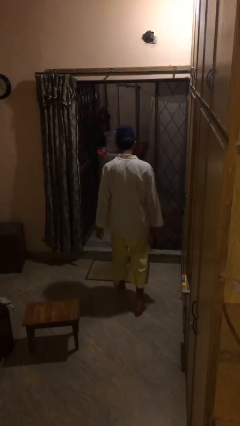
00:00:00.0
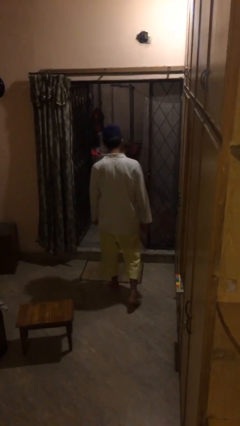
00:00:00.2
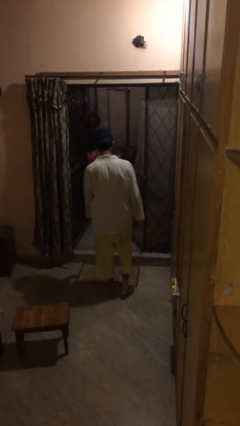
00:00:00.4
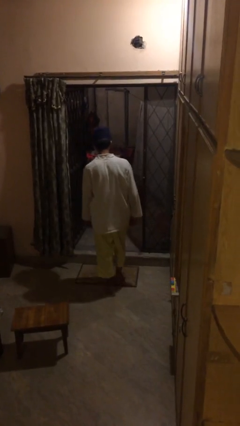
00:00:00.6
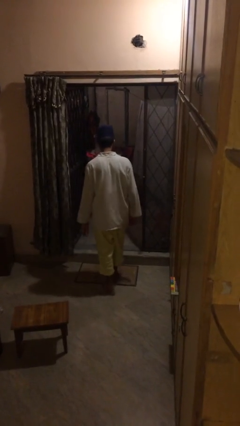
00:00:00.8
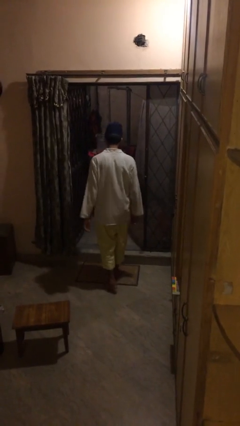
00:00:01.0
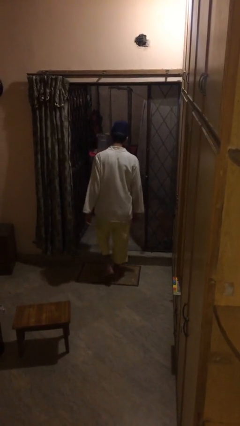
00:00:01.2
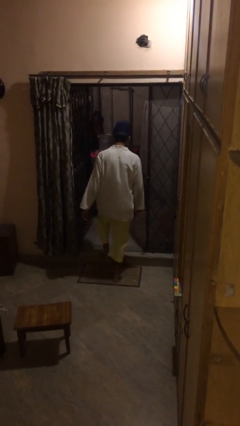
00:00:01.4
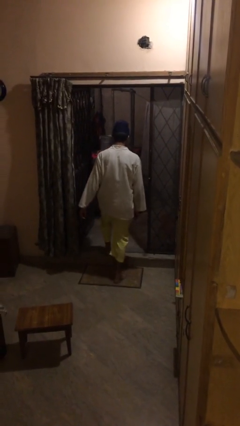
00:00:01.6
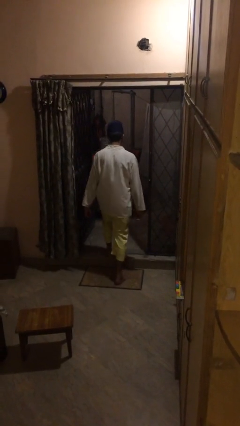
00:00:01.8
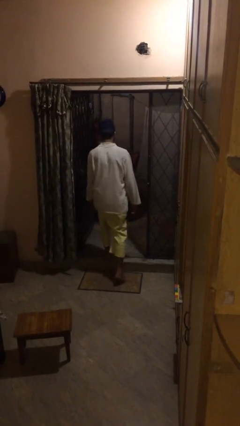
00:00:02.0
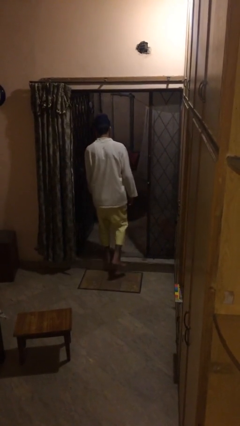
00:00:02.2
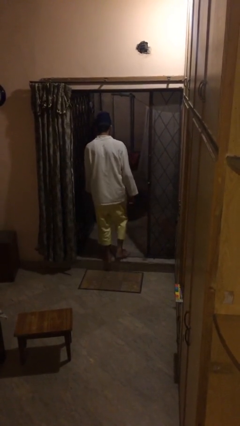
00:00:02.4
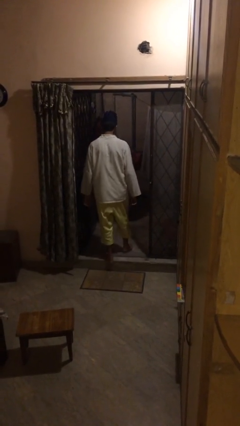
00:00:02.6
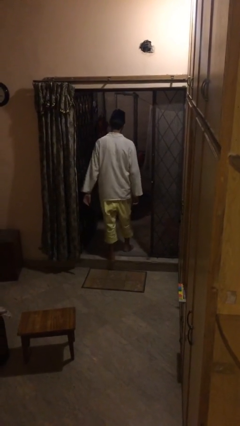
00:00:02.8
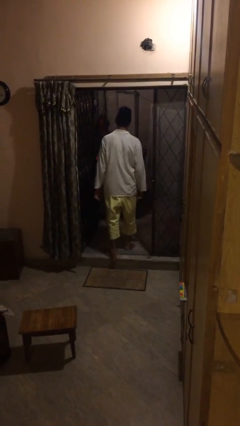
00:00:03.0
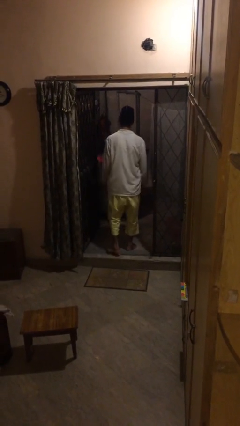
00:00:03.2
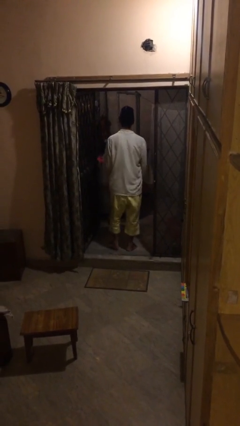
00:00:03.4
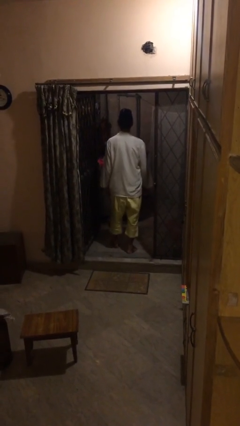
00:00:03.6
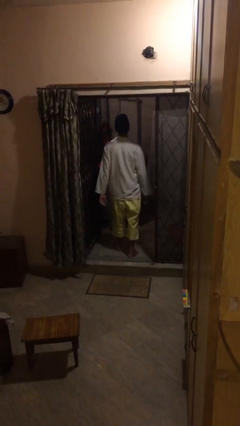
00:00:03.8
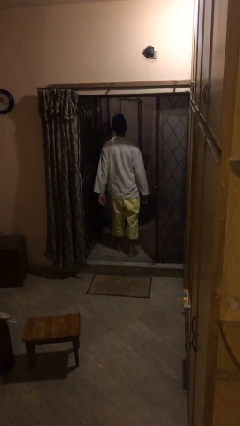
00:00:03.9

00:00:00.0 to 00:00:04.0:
person exits scene through structure

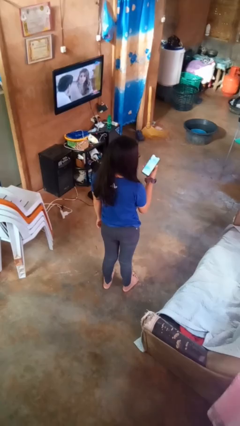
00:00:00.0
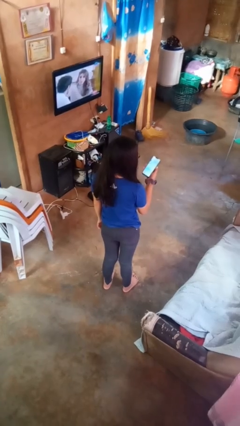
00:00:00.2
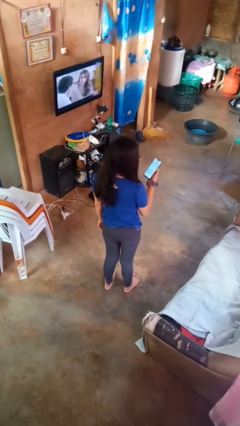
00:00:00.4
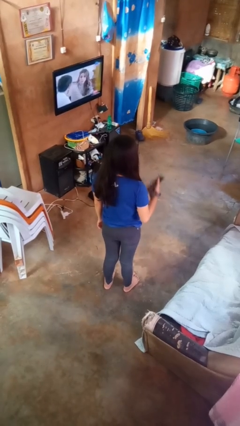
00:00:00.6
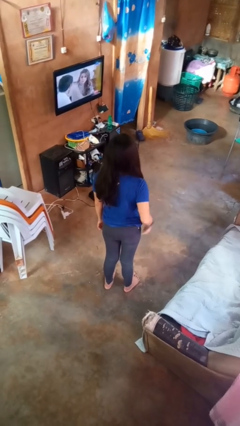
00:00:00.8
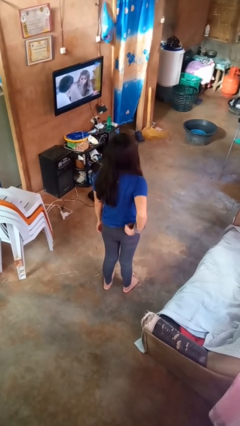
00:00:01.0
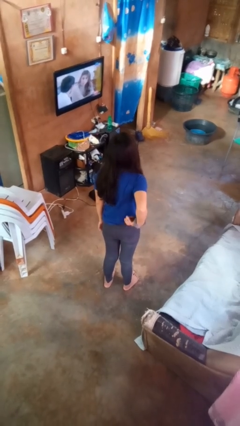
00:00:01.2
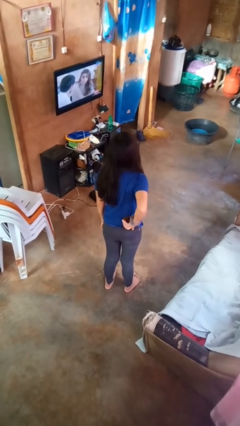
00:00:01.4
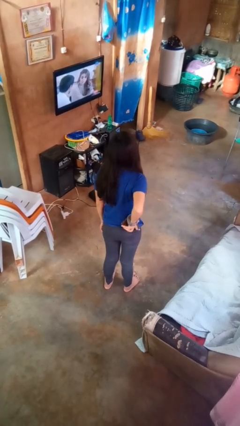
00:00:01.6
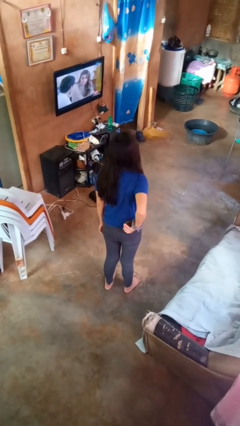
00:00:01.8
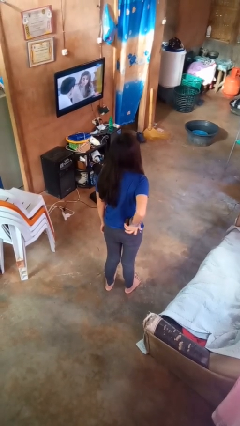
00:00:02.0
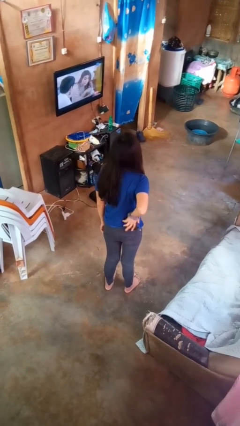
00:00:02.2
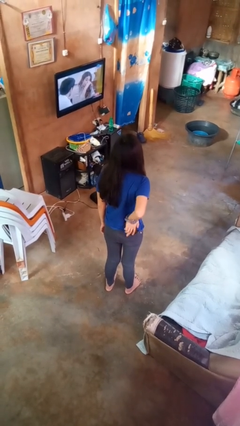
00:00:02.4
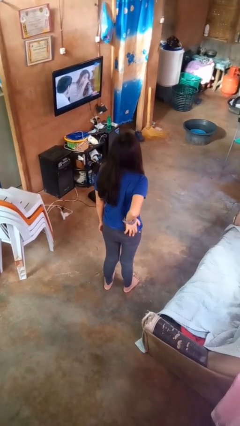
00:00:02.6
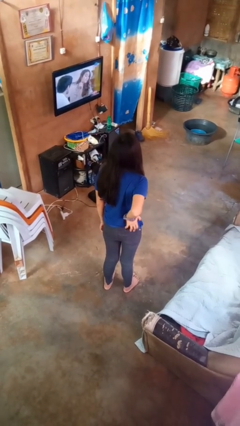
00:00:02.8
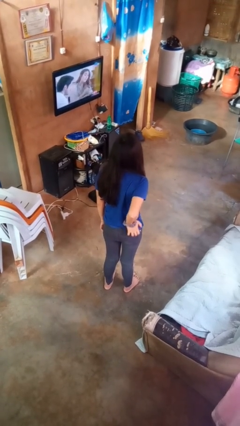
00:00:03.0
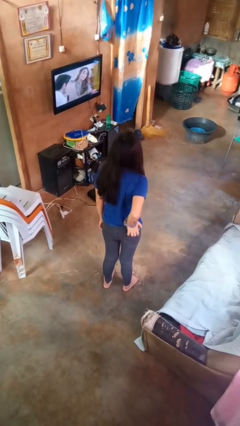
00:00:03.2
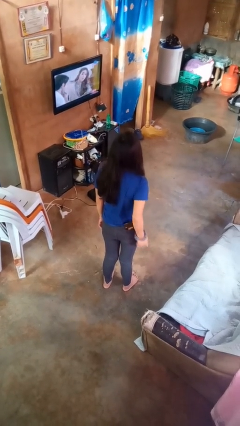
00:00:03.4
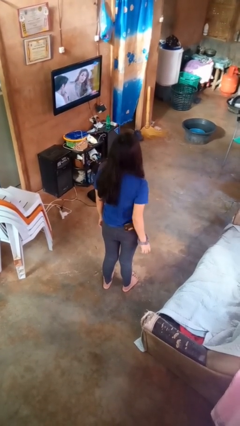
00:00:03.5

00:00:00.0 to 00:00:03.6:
person puts phone into pocket

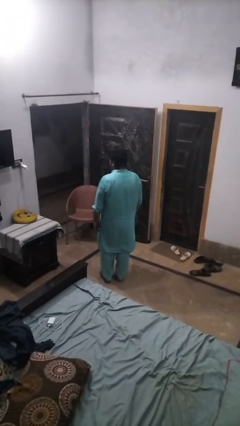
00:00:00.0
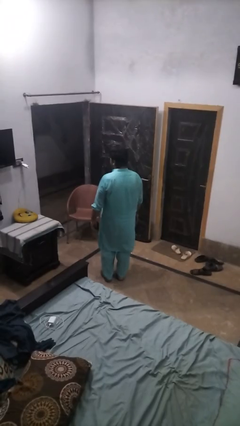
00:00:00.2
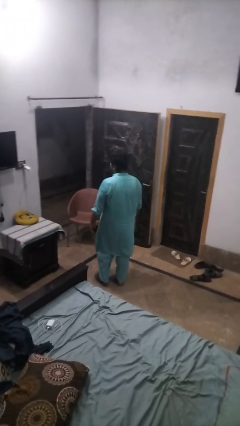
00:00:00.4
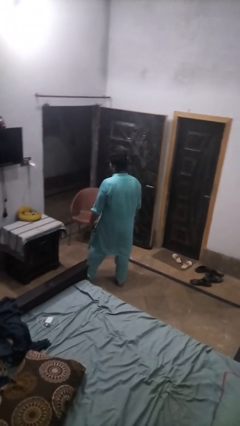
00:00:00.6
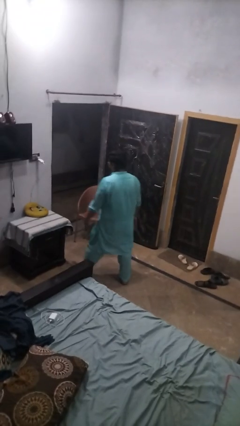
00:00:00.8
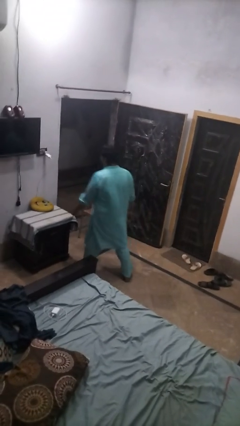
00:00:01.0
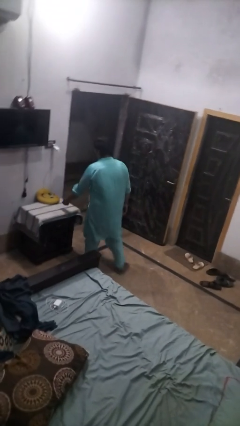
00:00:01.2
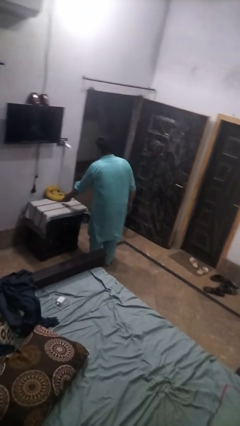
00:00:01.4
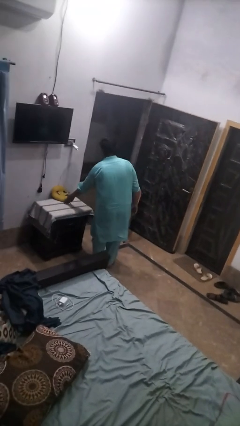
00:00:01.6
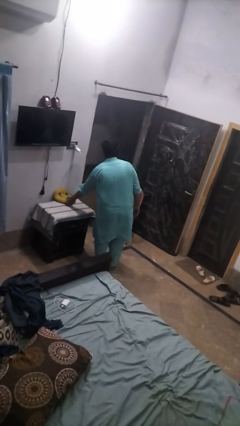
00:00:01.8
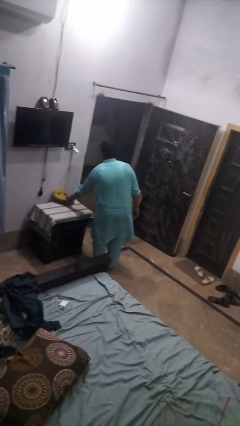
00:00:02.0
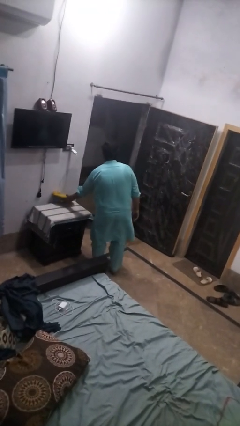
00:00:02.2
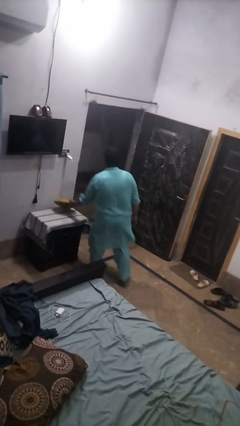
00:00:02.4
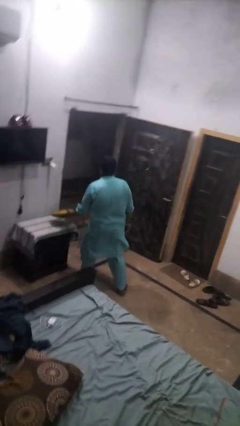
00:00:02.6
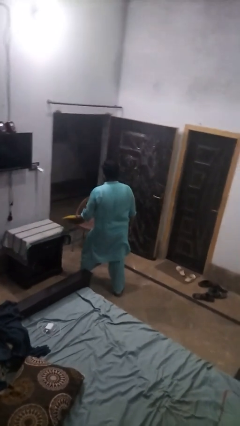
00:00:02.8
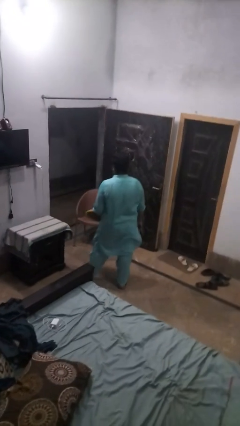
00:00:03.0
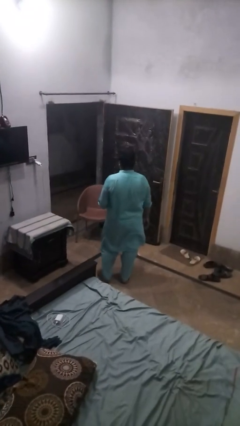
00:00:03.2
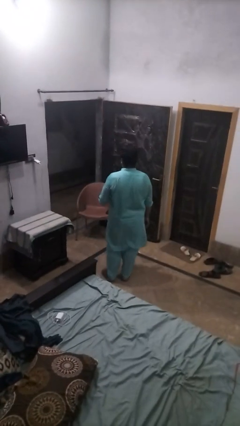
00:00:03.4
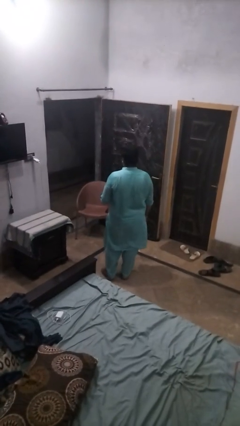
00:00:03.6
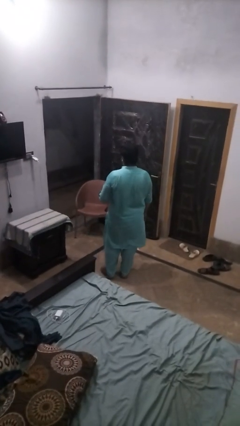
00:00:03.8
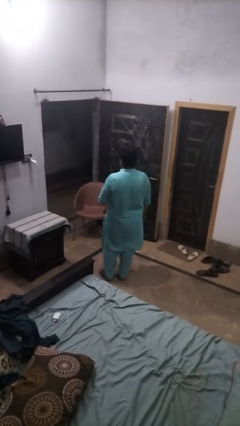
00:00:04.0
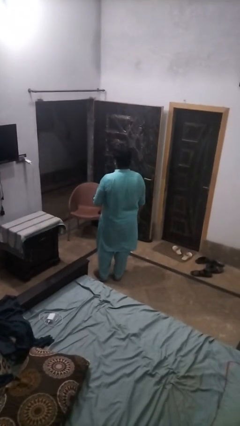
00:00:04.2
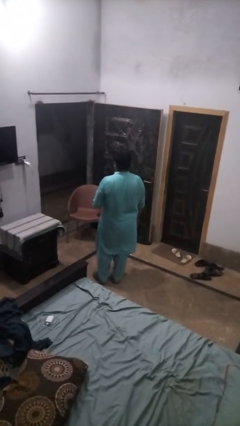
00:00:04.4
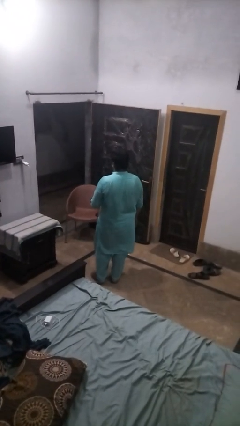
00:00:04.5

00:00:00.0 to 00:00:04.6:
person picks up object from table

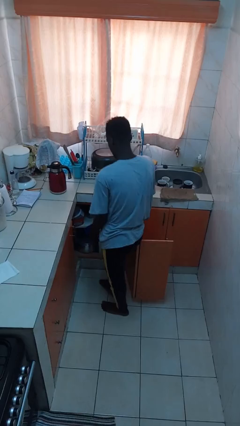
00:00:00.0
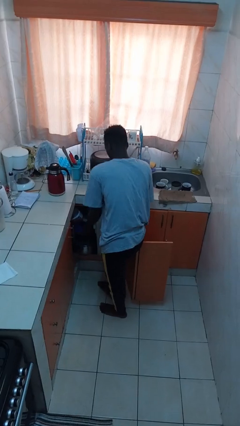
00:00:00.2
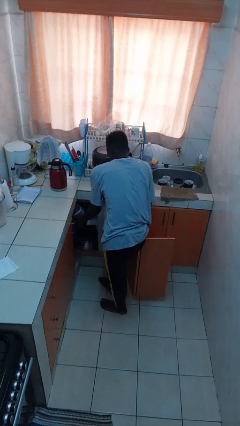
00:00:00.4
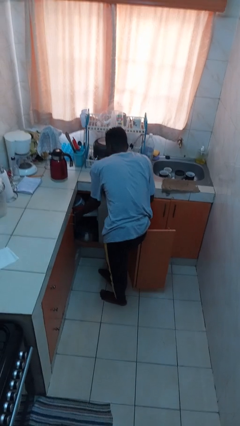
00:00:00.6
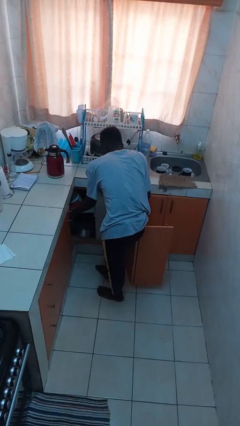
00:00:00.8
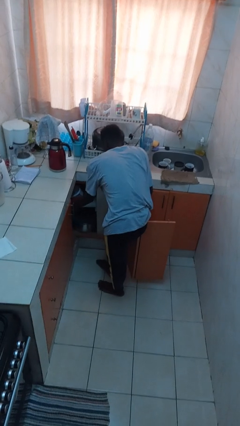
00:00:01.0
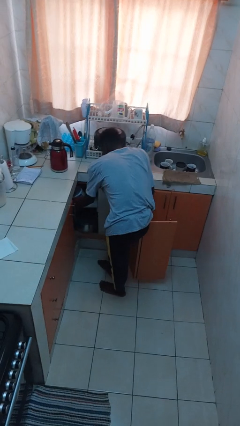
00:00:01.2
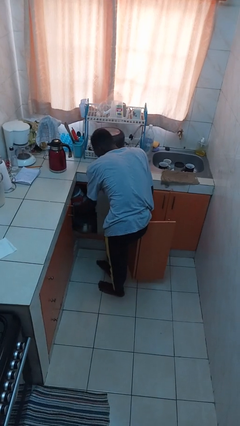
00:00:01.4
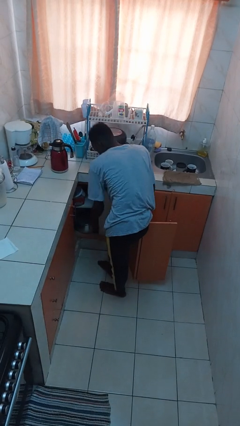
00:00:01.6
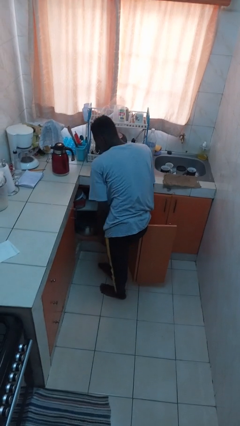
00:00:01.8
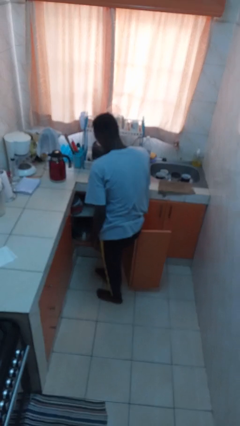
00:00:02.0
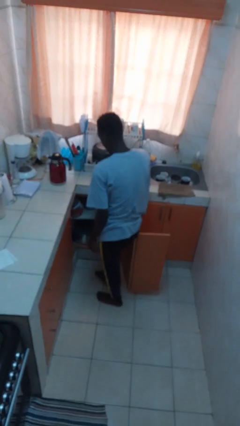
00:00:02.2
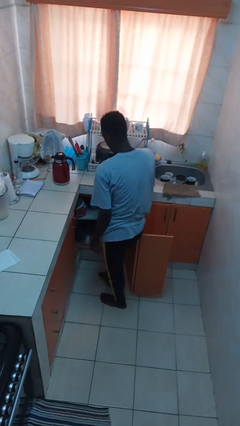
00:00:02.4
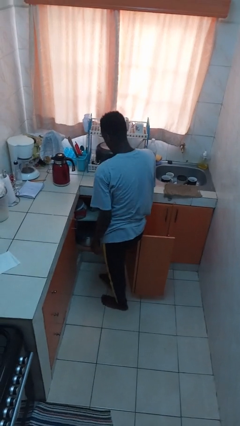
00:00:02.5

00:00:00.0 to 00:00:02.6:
person puts object in cabinet

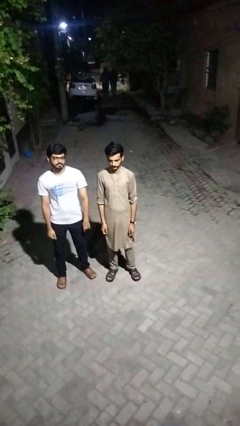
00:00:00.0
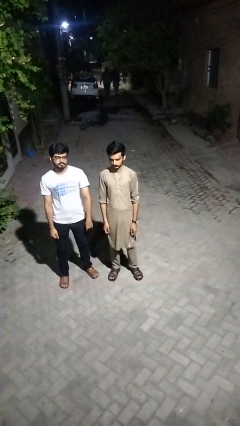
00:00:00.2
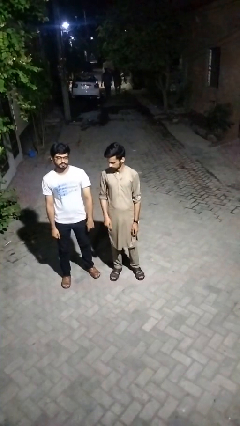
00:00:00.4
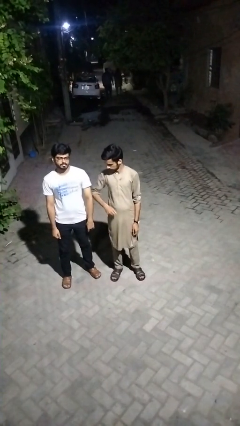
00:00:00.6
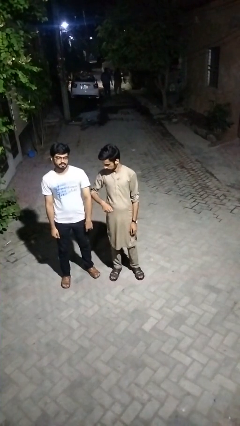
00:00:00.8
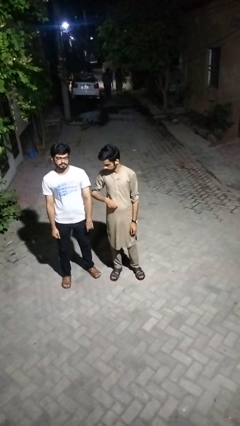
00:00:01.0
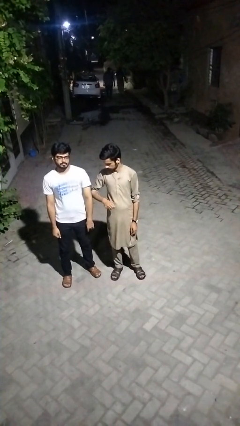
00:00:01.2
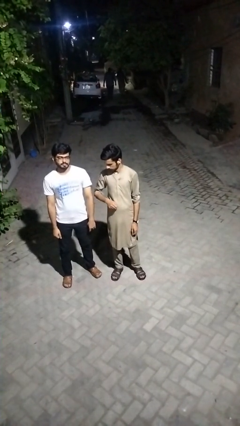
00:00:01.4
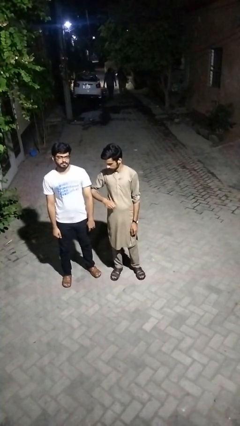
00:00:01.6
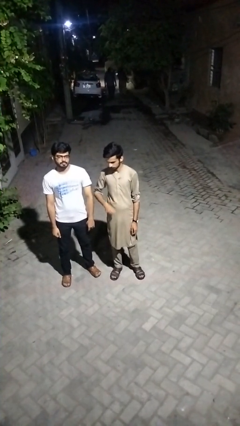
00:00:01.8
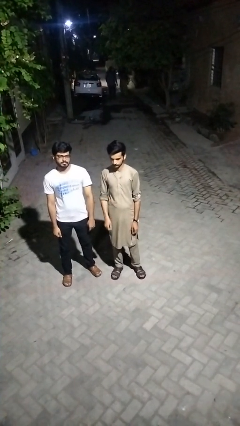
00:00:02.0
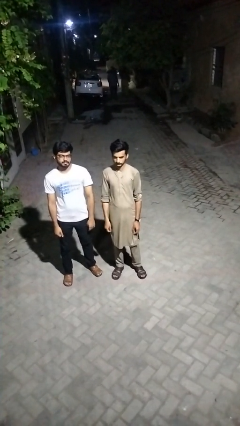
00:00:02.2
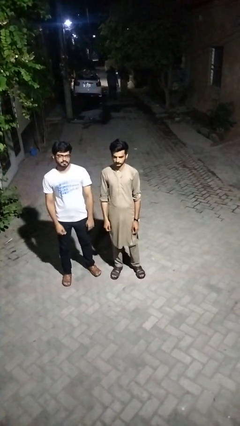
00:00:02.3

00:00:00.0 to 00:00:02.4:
person nudges person with elbow

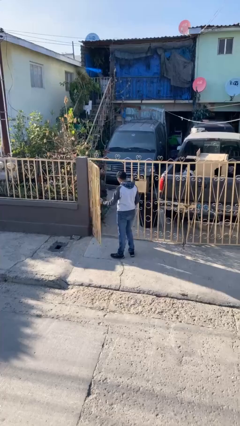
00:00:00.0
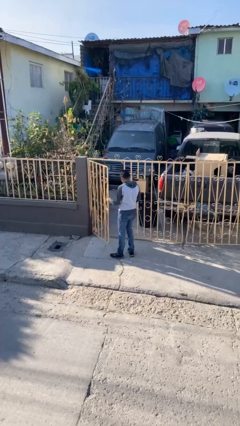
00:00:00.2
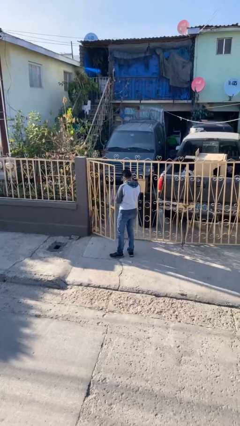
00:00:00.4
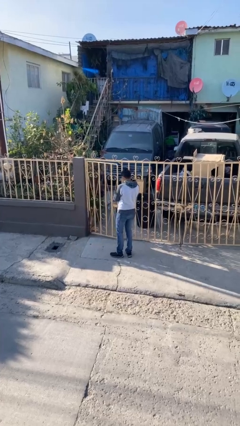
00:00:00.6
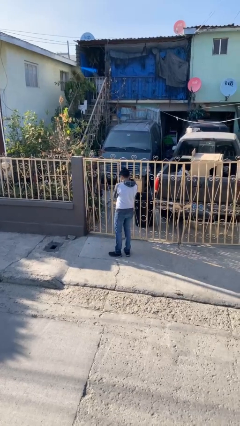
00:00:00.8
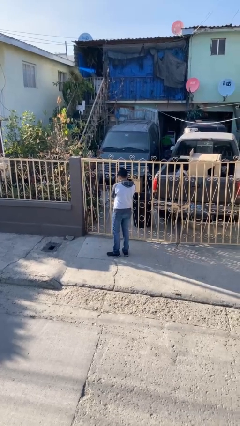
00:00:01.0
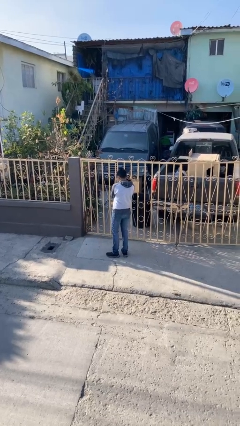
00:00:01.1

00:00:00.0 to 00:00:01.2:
person closes facility door
